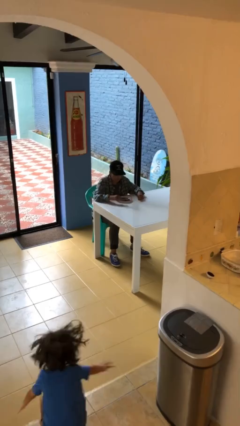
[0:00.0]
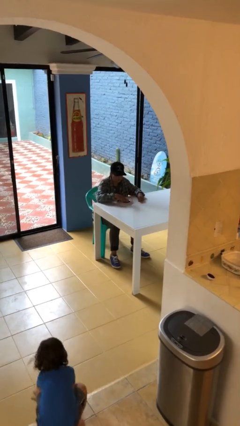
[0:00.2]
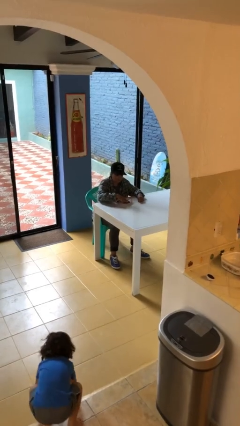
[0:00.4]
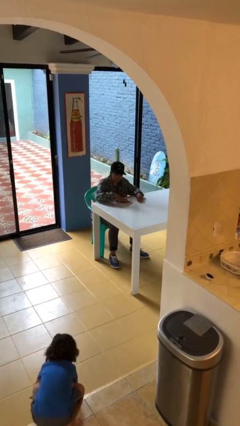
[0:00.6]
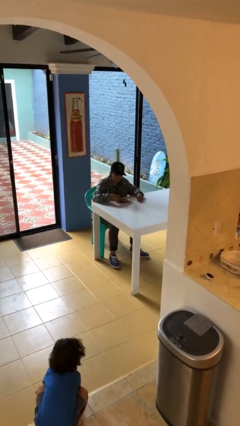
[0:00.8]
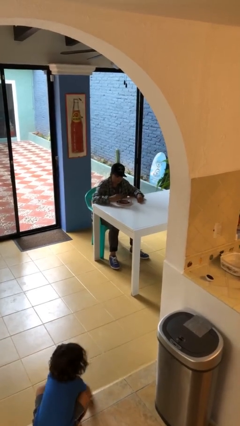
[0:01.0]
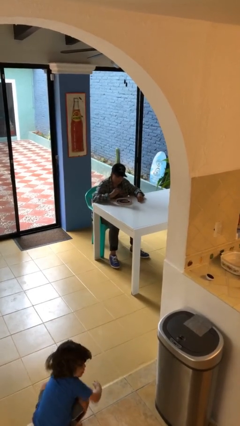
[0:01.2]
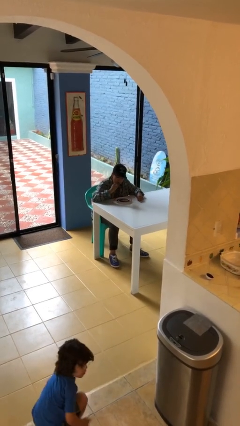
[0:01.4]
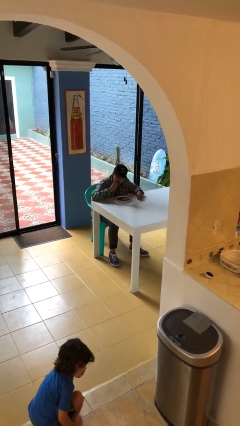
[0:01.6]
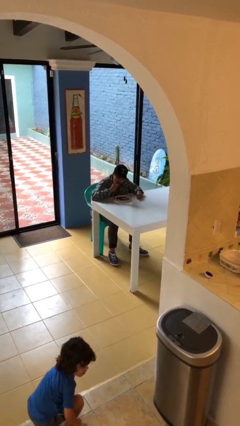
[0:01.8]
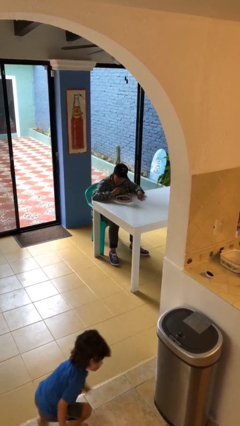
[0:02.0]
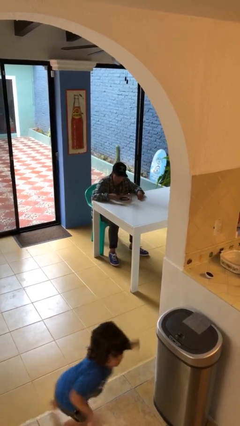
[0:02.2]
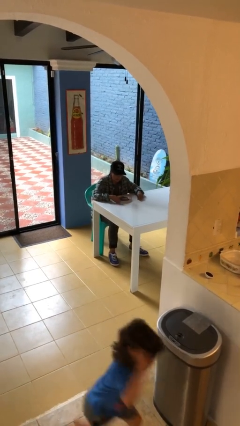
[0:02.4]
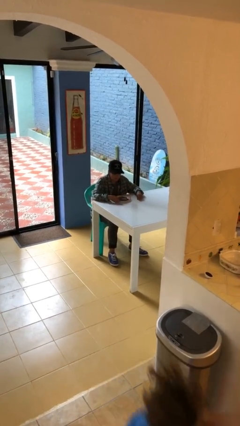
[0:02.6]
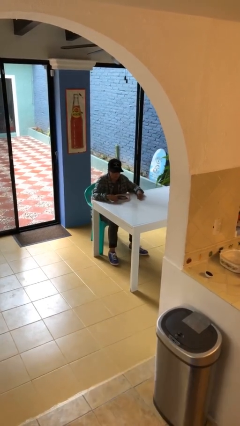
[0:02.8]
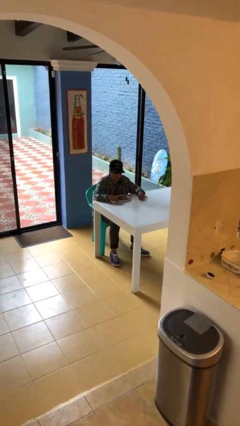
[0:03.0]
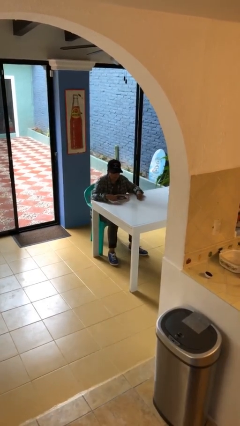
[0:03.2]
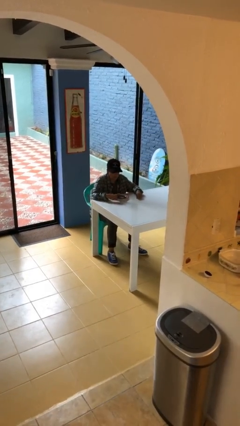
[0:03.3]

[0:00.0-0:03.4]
person eats with hands

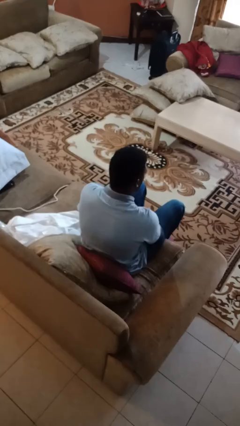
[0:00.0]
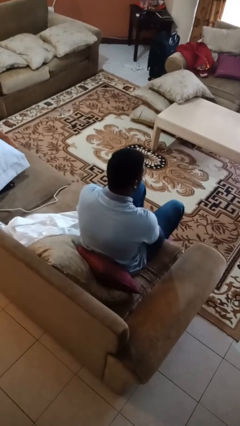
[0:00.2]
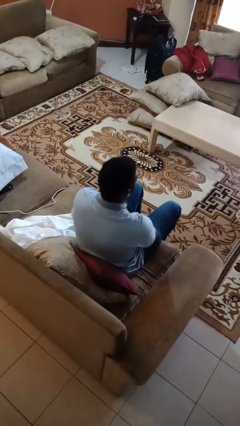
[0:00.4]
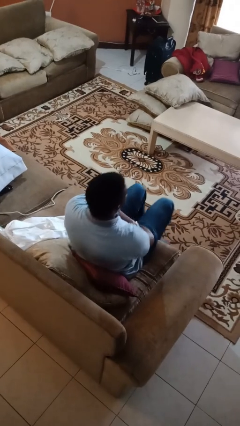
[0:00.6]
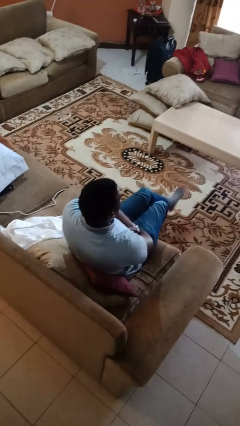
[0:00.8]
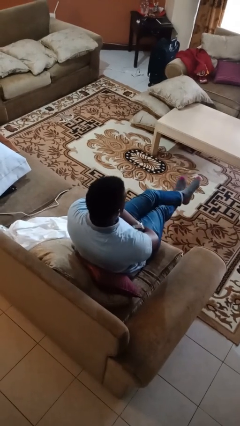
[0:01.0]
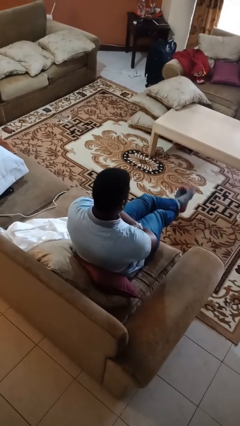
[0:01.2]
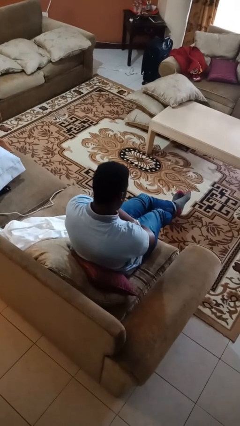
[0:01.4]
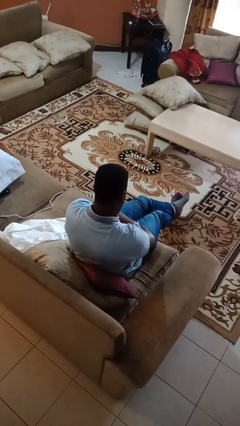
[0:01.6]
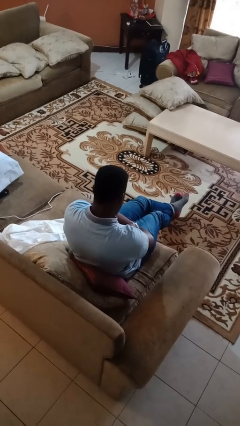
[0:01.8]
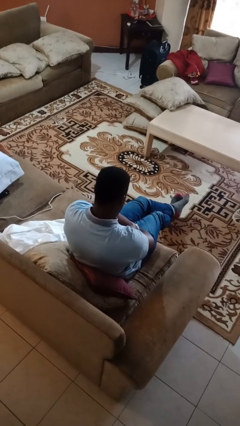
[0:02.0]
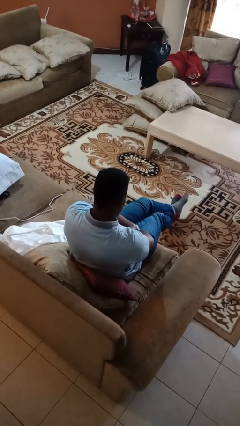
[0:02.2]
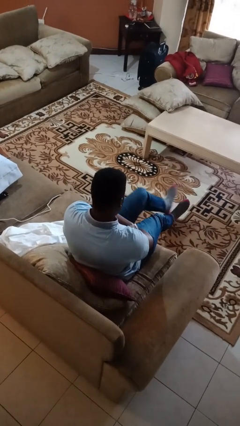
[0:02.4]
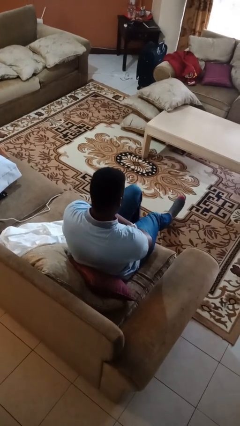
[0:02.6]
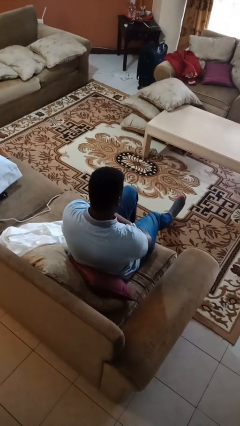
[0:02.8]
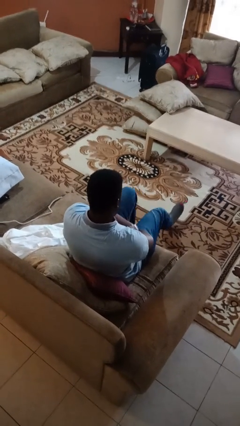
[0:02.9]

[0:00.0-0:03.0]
person crosses legs

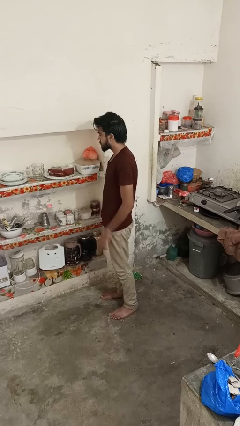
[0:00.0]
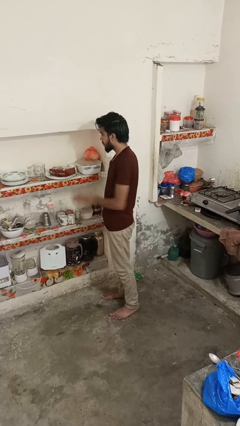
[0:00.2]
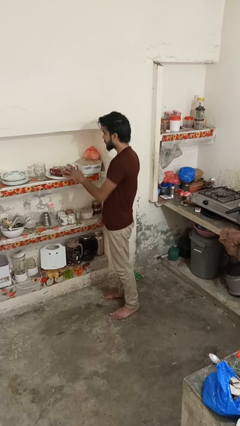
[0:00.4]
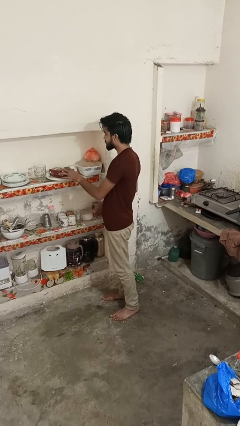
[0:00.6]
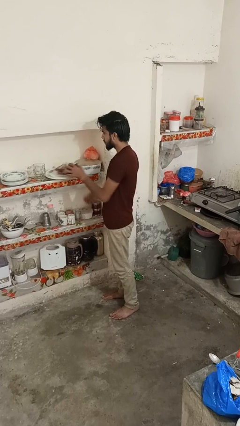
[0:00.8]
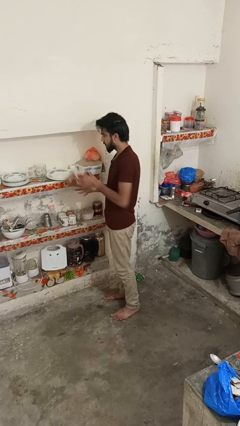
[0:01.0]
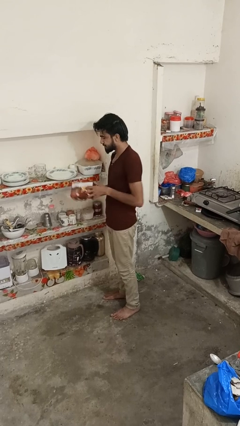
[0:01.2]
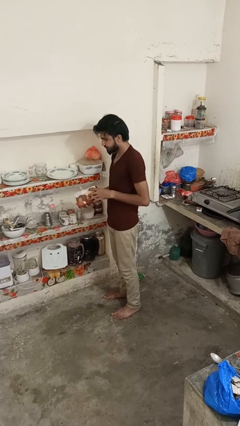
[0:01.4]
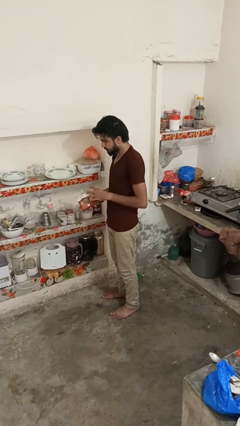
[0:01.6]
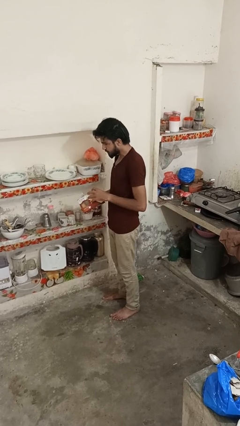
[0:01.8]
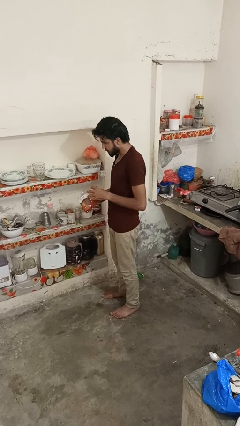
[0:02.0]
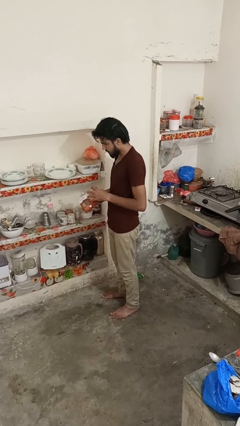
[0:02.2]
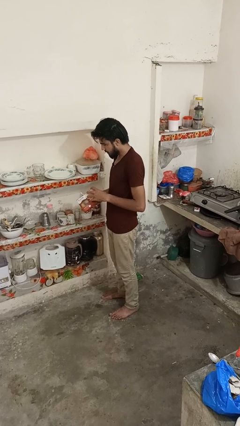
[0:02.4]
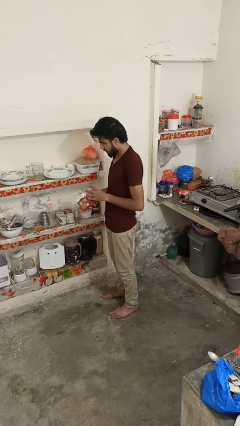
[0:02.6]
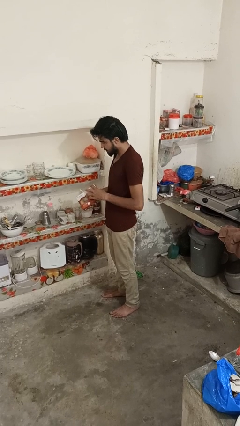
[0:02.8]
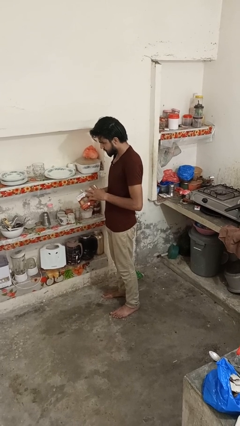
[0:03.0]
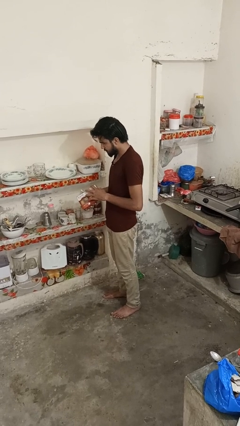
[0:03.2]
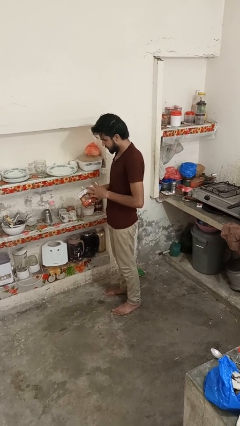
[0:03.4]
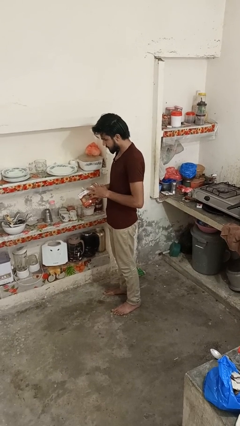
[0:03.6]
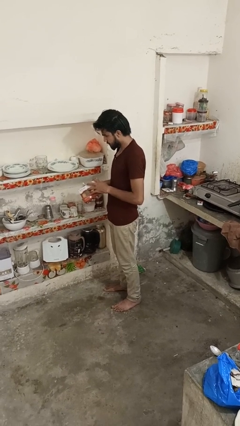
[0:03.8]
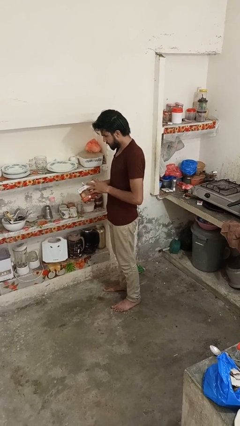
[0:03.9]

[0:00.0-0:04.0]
person picks up object from cabinet

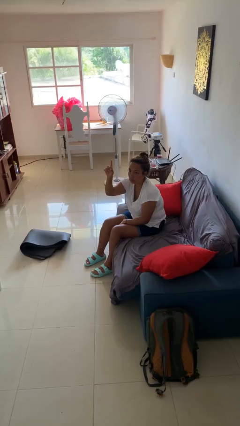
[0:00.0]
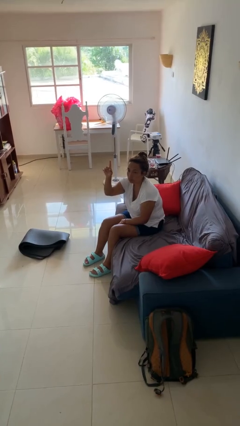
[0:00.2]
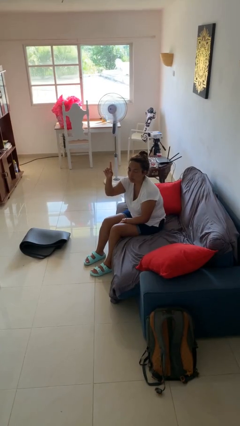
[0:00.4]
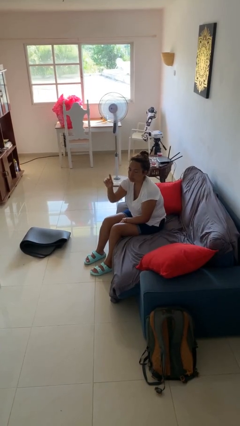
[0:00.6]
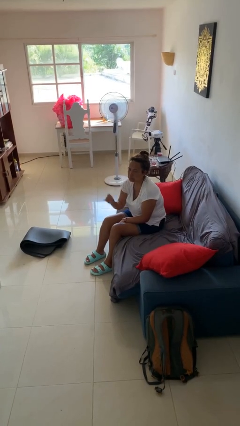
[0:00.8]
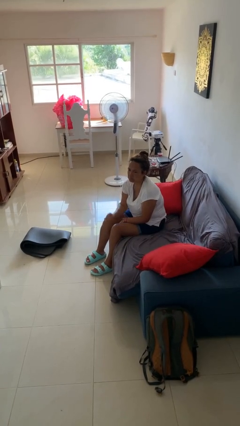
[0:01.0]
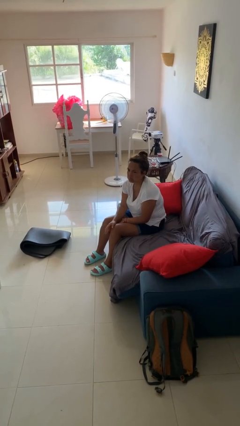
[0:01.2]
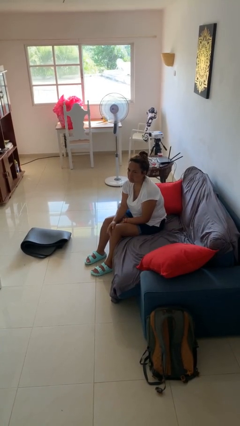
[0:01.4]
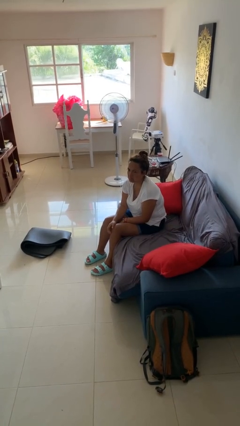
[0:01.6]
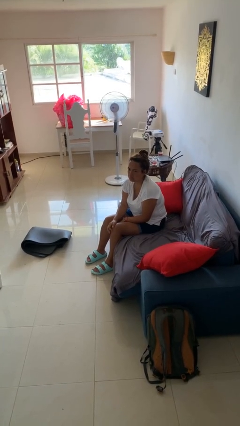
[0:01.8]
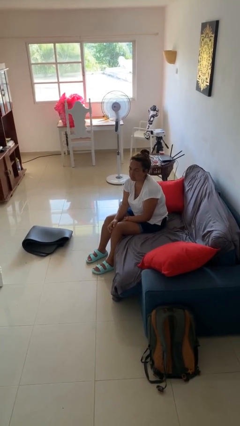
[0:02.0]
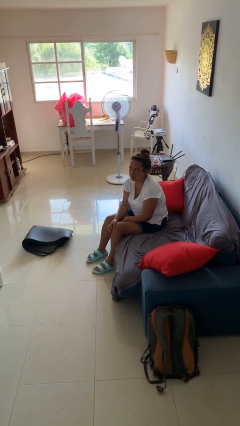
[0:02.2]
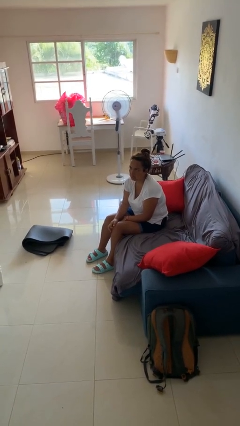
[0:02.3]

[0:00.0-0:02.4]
person gestures lower hand

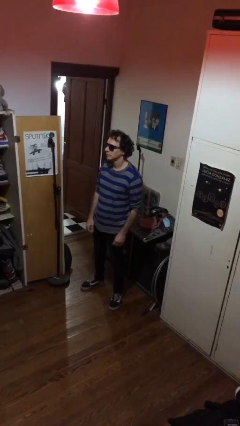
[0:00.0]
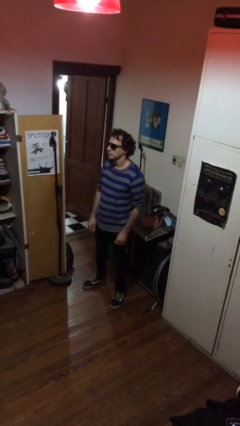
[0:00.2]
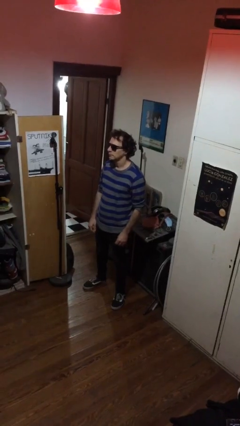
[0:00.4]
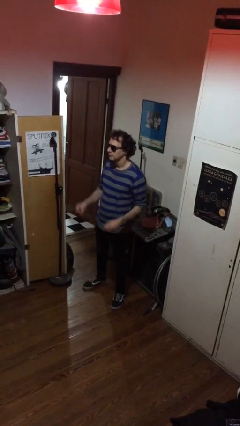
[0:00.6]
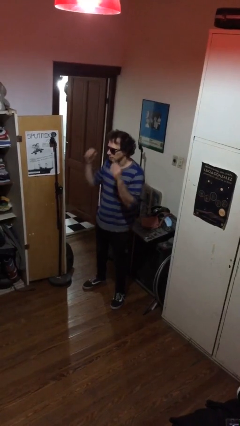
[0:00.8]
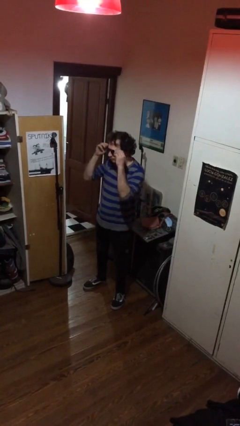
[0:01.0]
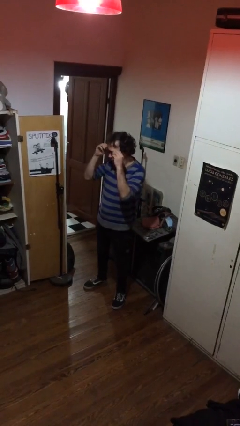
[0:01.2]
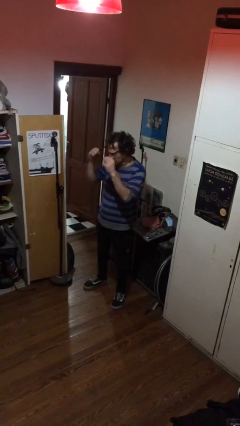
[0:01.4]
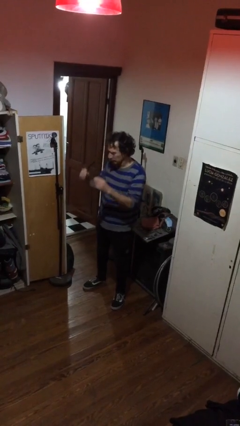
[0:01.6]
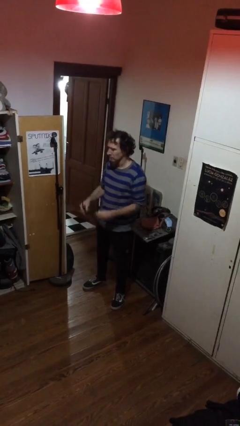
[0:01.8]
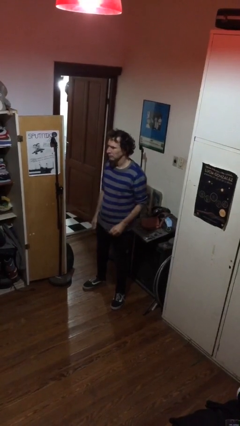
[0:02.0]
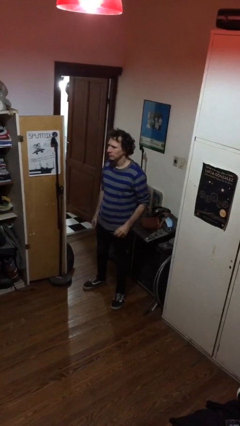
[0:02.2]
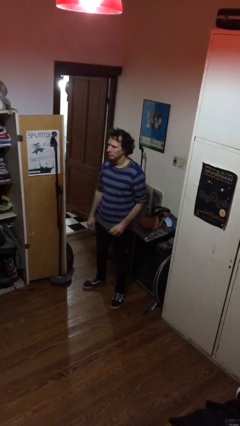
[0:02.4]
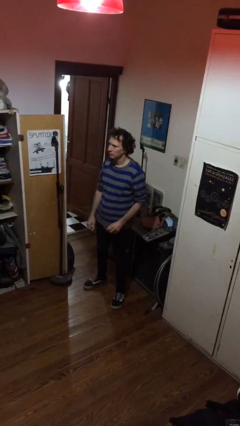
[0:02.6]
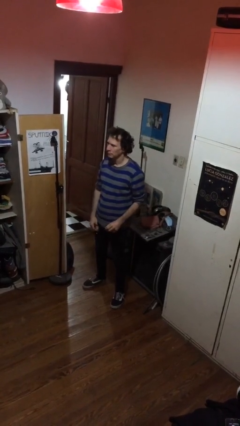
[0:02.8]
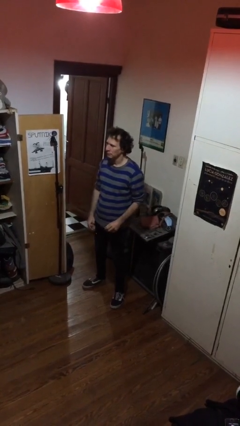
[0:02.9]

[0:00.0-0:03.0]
person takes off sunglasses

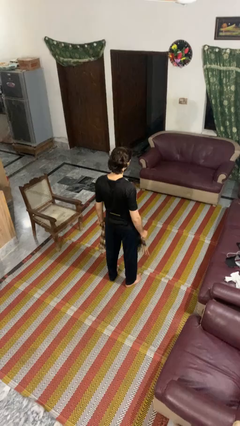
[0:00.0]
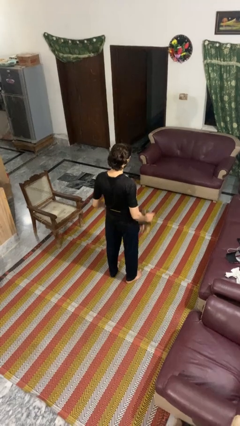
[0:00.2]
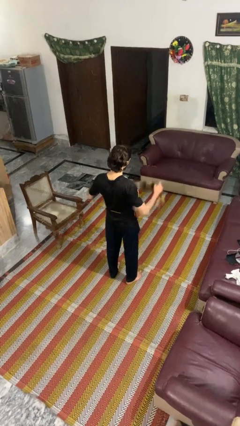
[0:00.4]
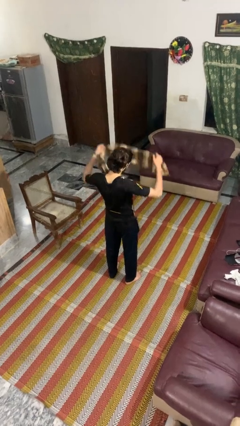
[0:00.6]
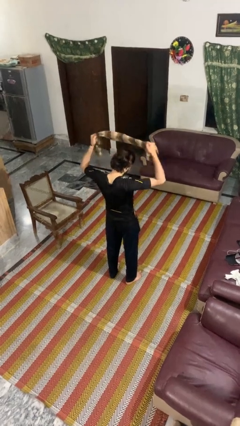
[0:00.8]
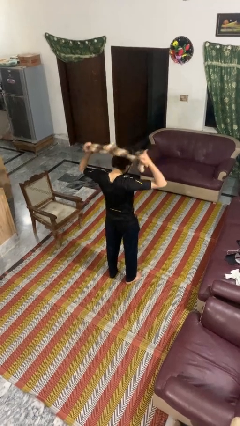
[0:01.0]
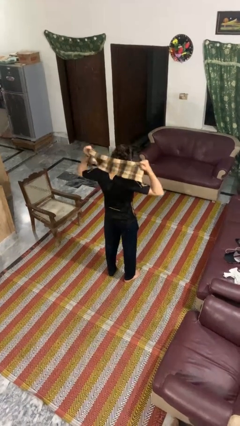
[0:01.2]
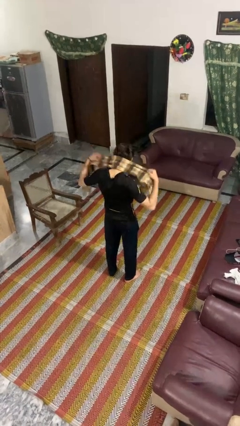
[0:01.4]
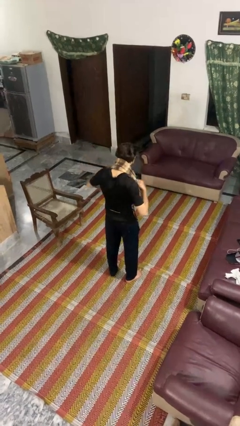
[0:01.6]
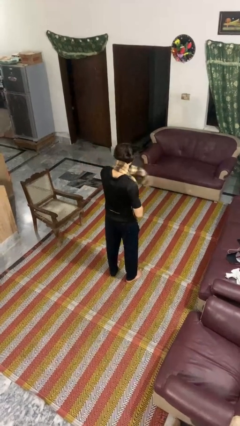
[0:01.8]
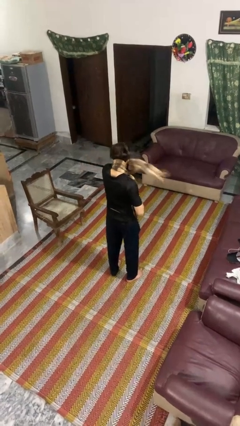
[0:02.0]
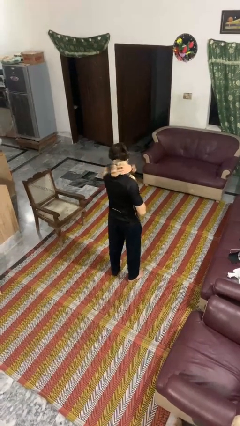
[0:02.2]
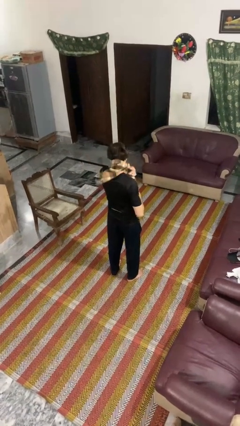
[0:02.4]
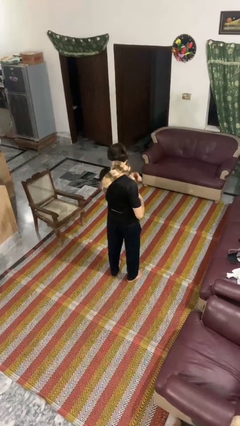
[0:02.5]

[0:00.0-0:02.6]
person puts on scarf
